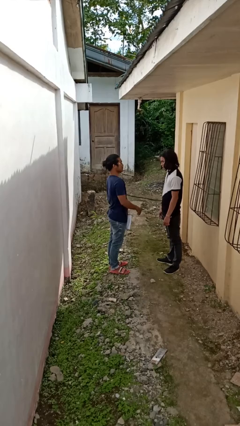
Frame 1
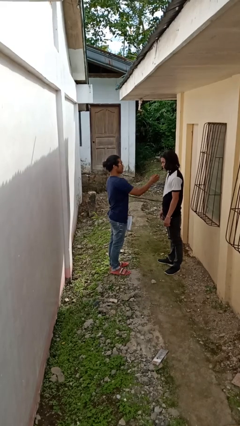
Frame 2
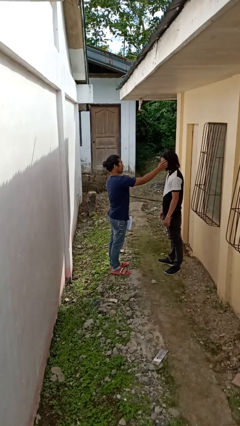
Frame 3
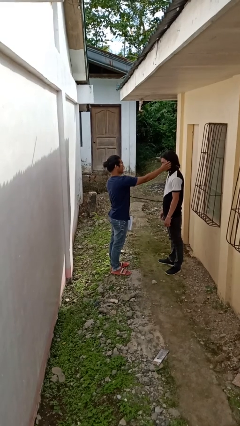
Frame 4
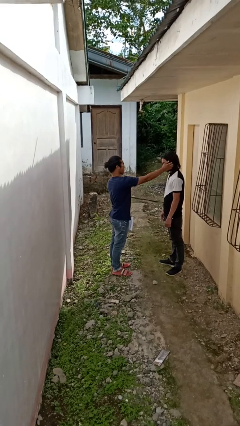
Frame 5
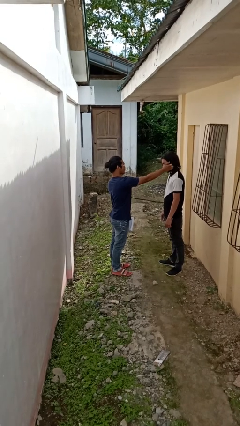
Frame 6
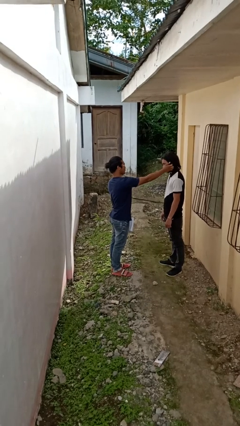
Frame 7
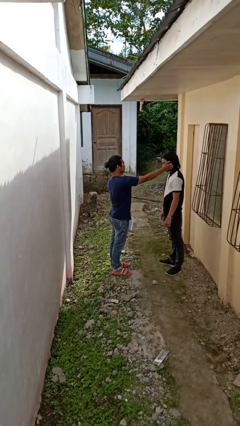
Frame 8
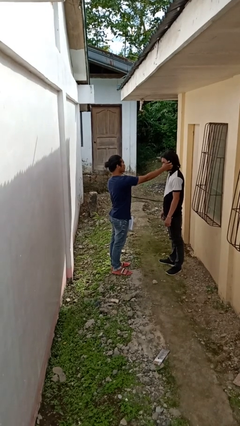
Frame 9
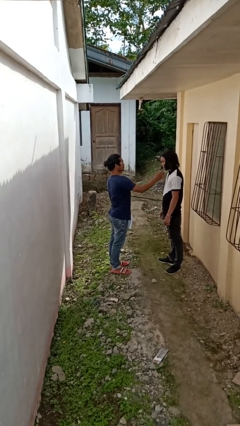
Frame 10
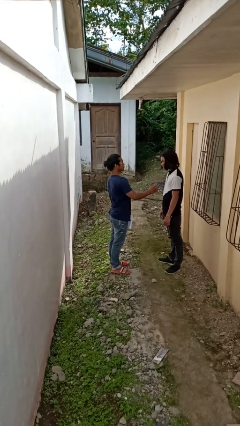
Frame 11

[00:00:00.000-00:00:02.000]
person touches face of person

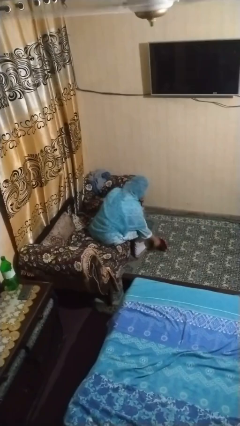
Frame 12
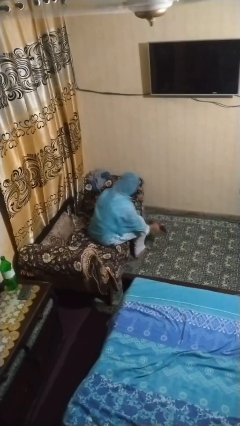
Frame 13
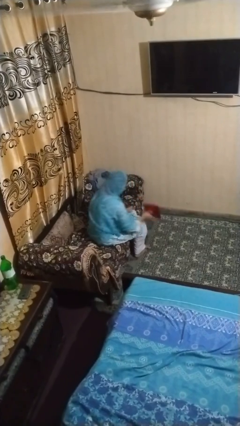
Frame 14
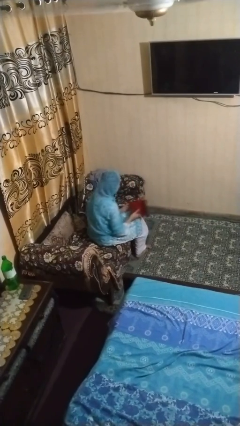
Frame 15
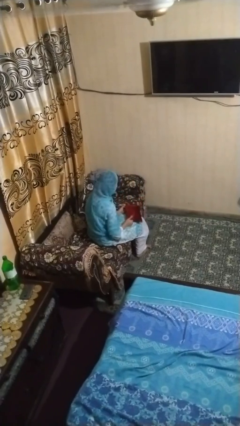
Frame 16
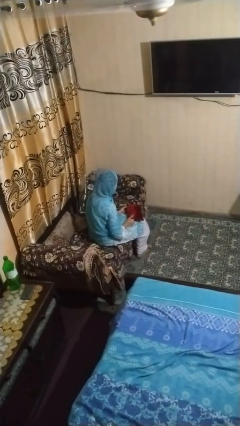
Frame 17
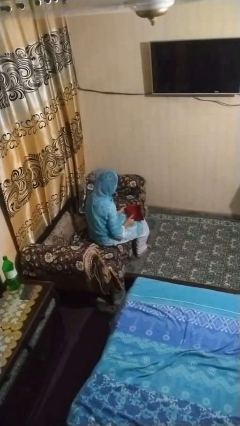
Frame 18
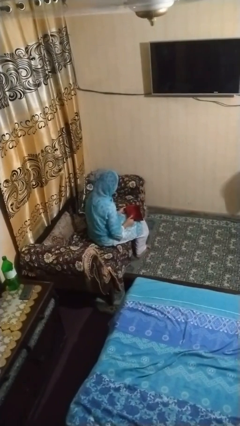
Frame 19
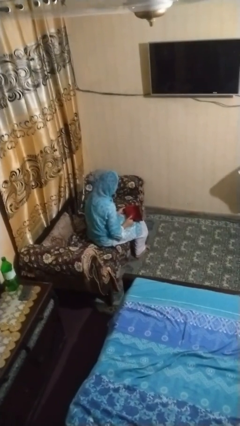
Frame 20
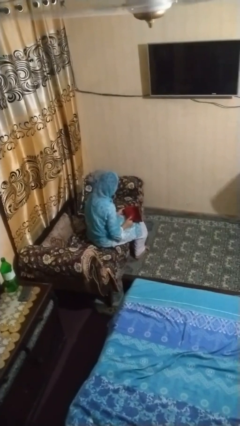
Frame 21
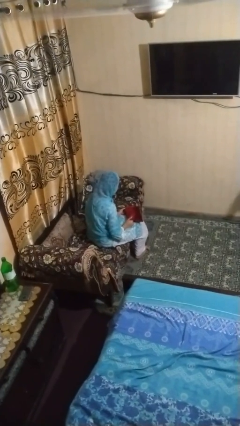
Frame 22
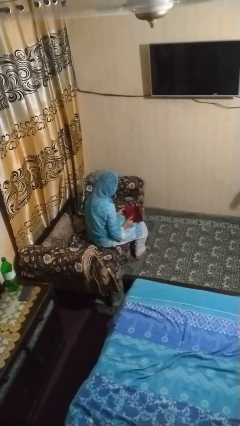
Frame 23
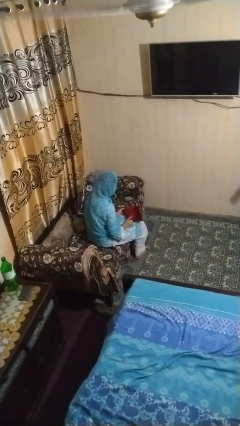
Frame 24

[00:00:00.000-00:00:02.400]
person picks up object from floor

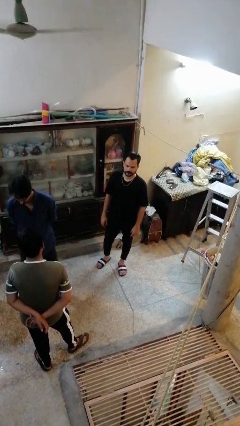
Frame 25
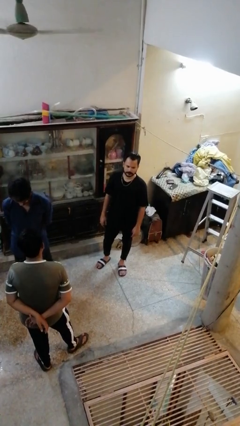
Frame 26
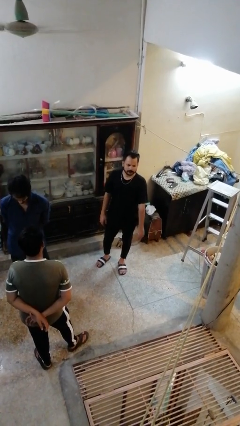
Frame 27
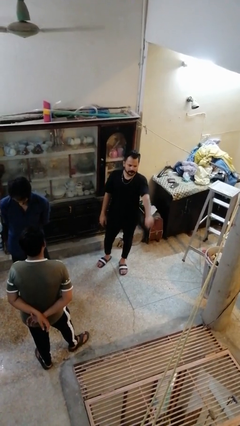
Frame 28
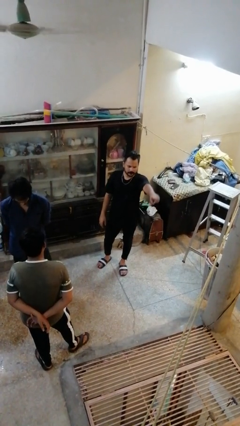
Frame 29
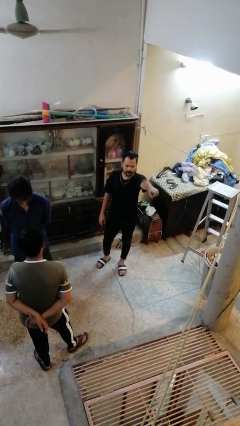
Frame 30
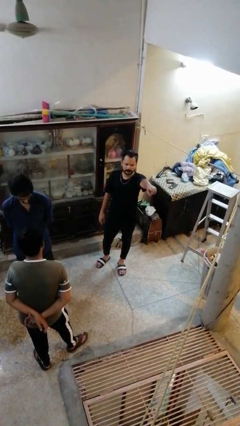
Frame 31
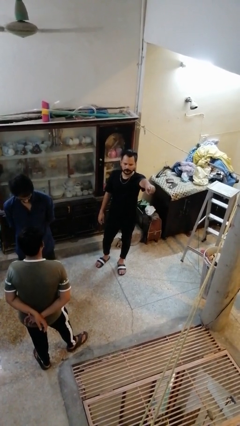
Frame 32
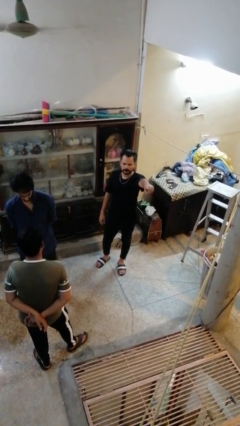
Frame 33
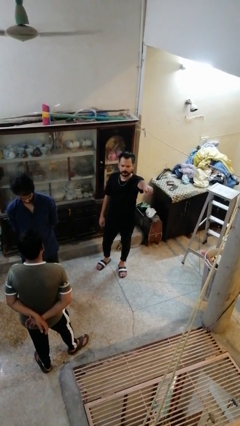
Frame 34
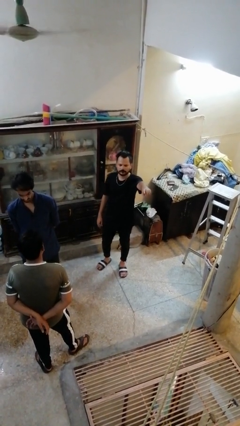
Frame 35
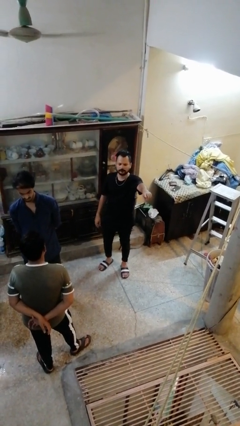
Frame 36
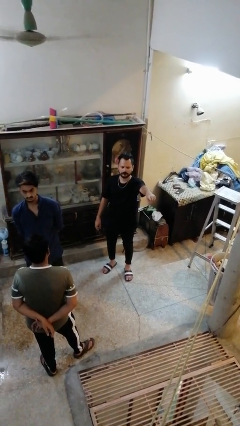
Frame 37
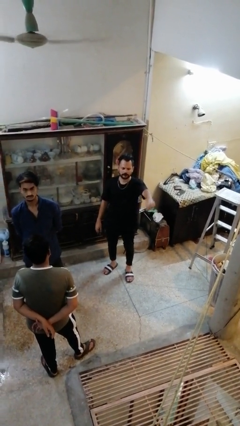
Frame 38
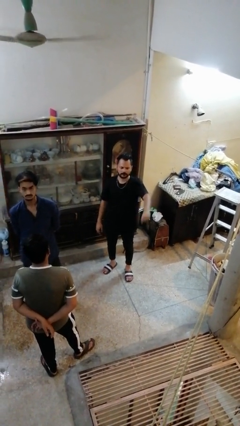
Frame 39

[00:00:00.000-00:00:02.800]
person points at person

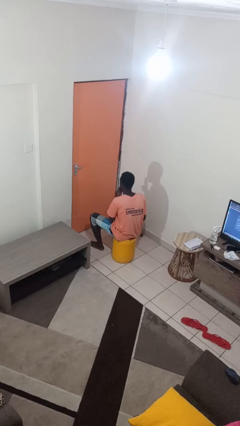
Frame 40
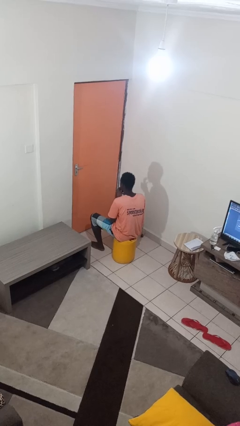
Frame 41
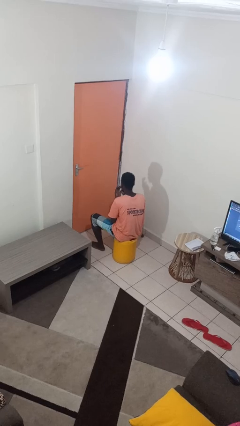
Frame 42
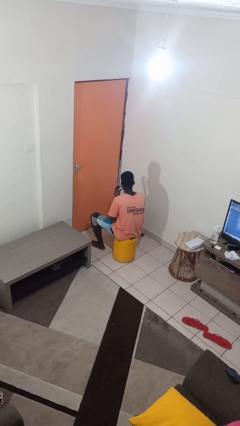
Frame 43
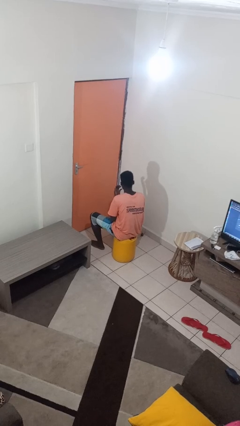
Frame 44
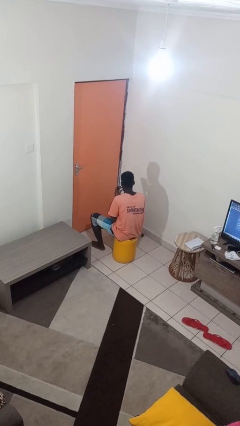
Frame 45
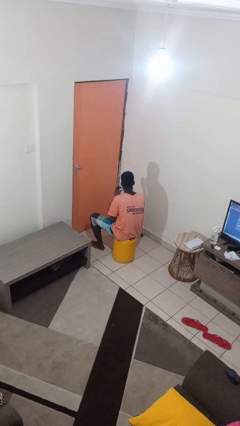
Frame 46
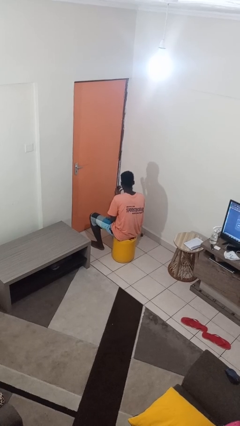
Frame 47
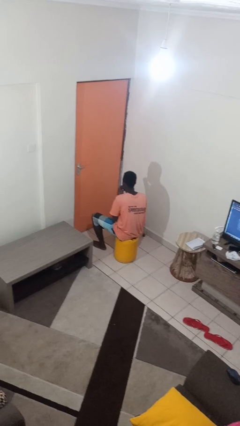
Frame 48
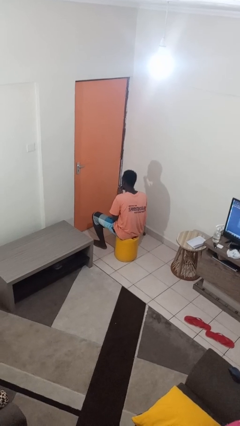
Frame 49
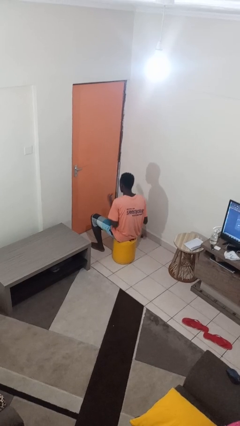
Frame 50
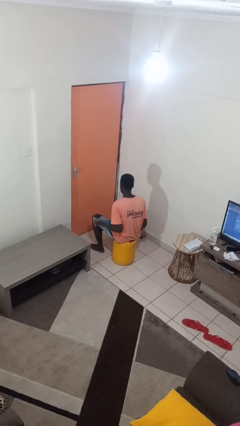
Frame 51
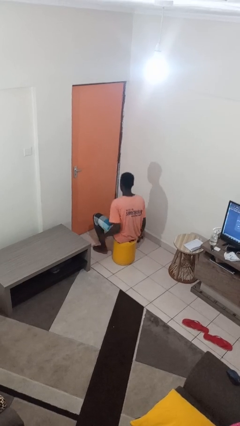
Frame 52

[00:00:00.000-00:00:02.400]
person licks fingers

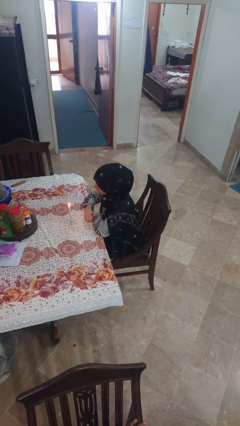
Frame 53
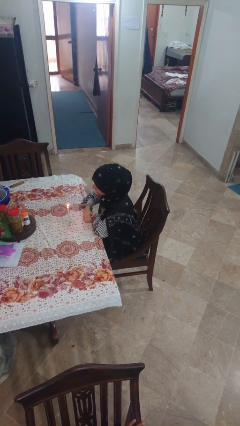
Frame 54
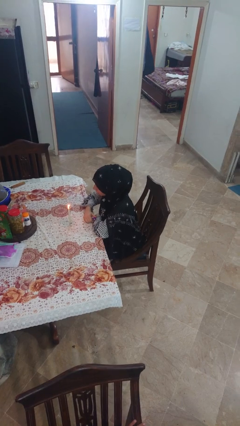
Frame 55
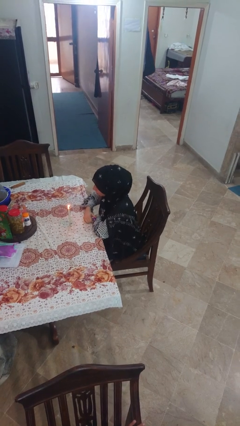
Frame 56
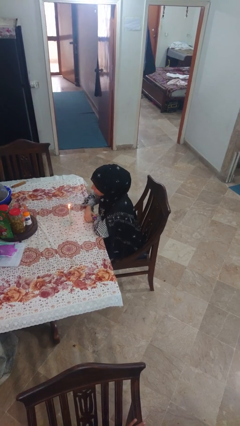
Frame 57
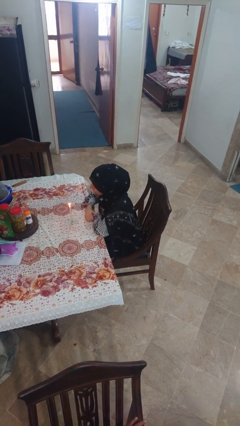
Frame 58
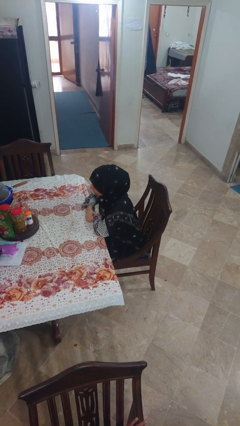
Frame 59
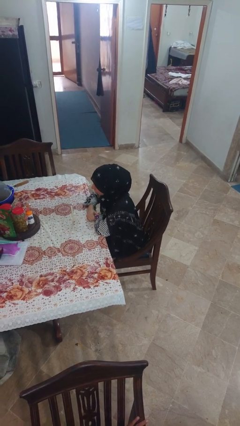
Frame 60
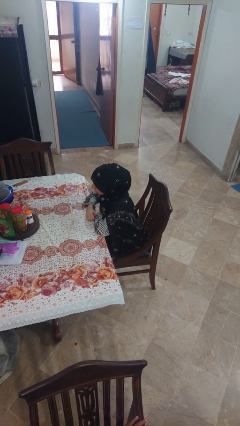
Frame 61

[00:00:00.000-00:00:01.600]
person extinguishes candle

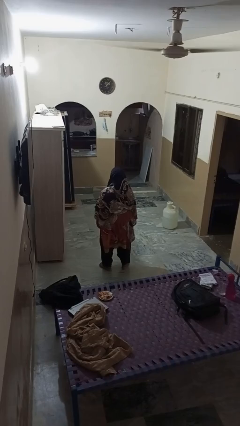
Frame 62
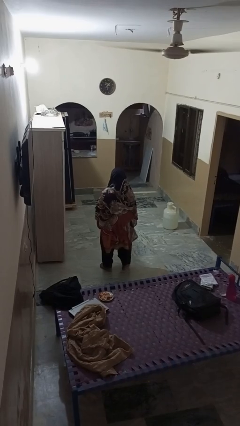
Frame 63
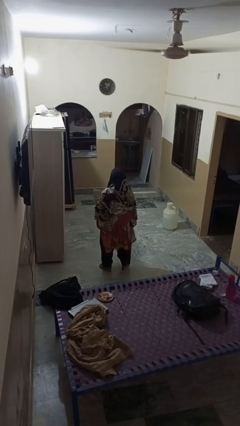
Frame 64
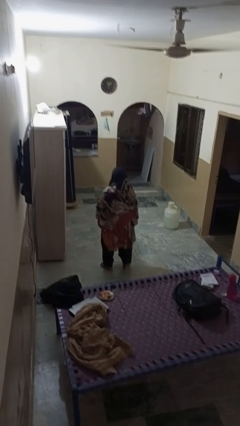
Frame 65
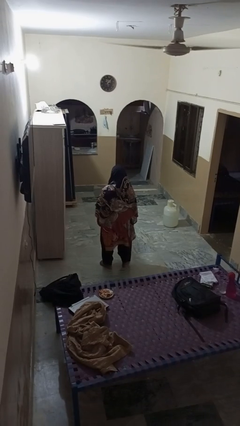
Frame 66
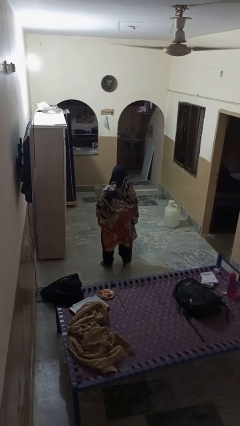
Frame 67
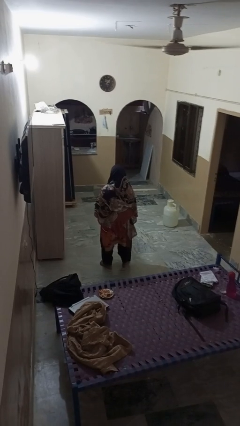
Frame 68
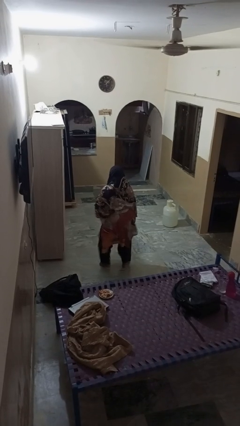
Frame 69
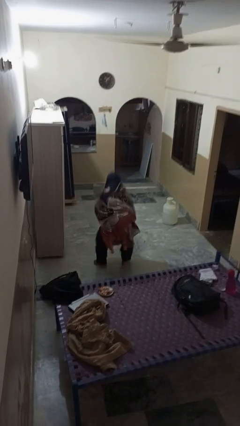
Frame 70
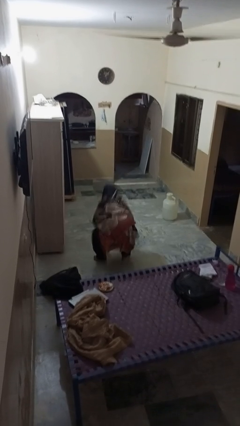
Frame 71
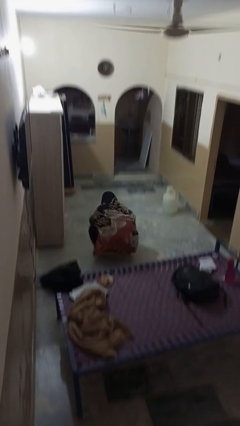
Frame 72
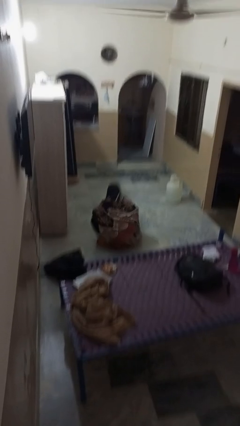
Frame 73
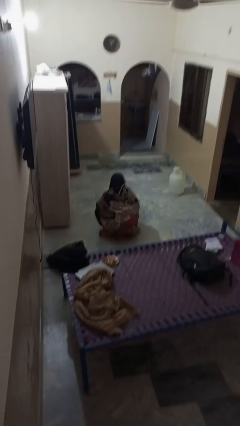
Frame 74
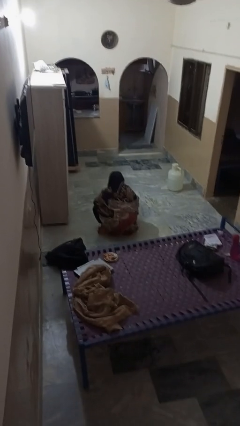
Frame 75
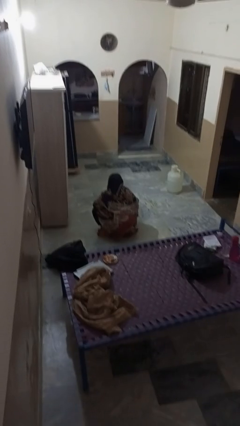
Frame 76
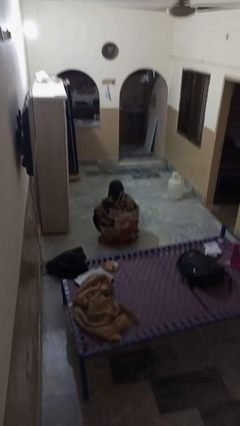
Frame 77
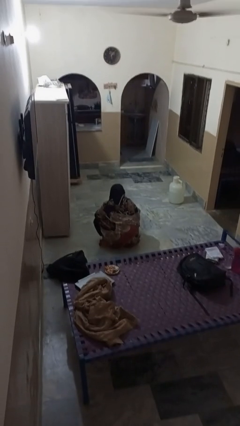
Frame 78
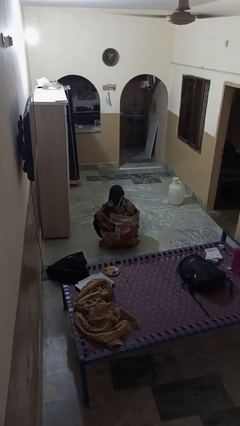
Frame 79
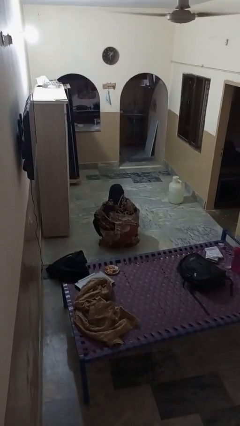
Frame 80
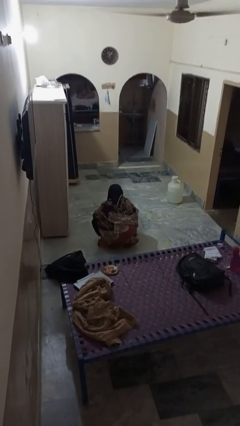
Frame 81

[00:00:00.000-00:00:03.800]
person squats

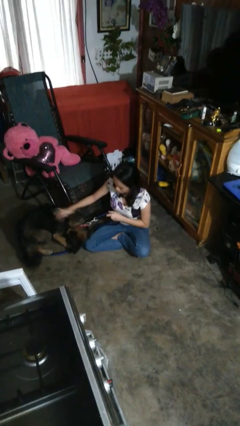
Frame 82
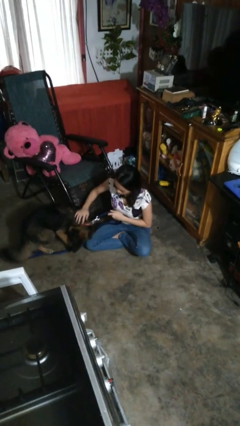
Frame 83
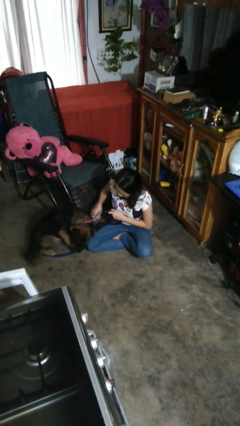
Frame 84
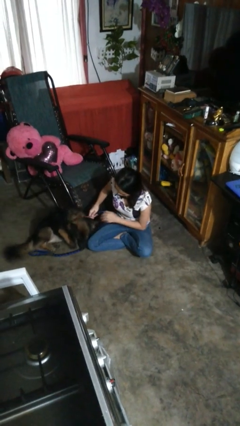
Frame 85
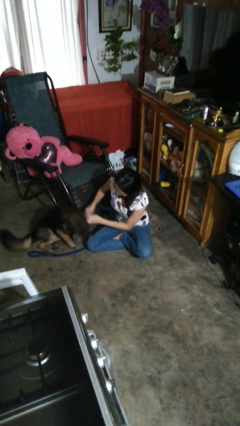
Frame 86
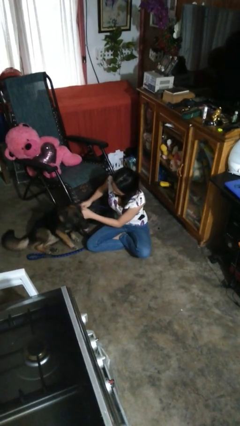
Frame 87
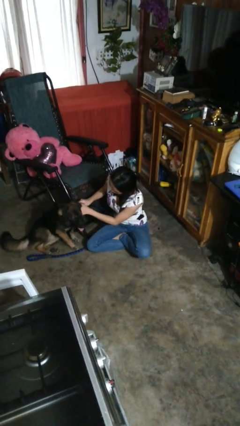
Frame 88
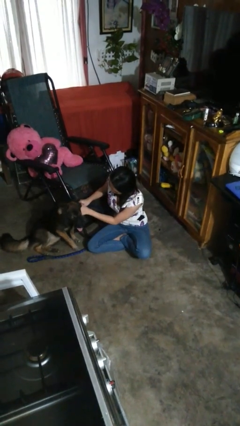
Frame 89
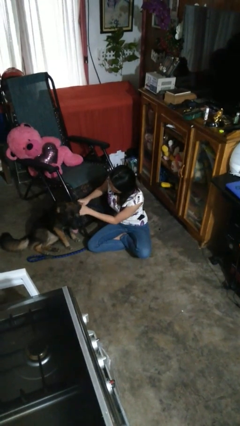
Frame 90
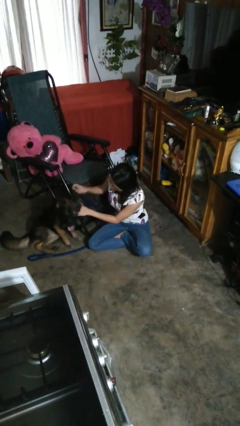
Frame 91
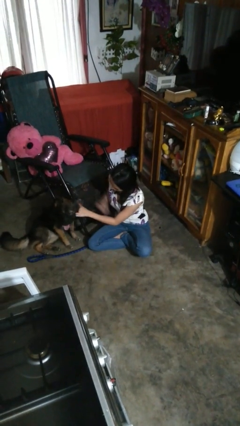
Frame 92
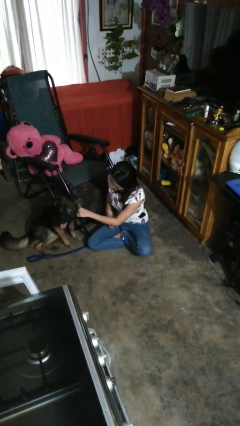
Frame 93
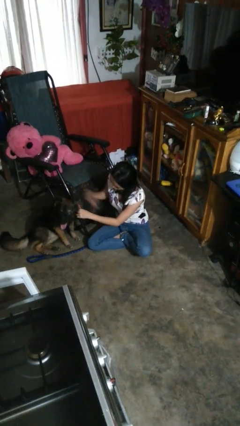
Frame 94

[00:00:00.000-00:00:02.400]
person unattaches leash from dog
